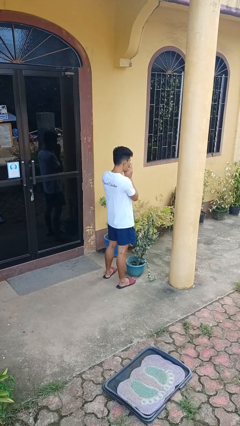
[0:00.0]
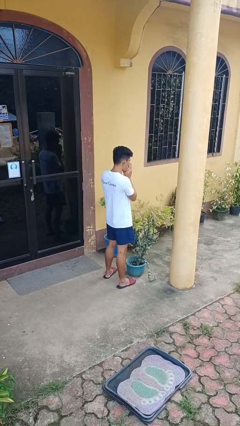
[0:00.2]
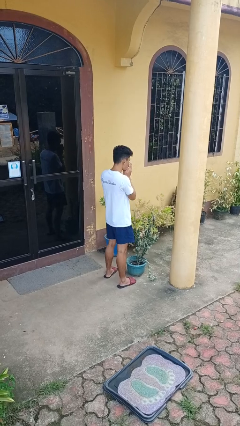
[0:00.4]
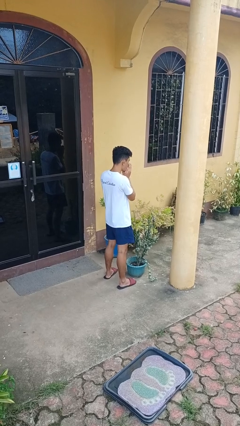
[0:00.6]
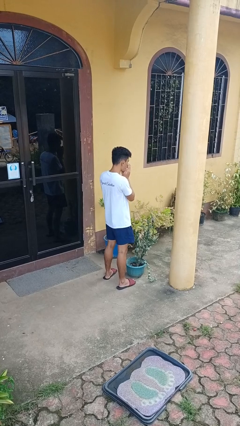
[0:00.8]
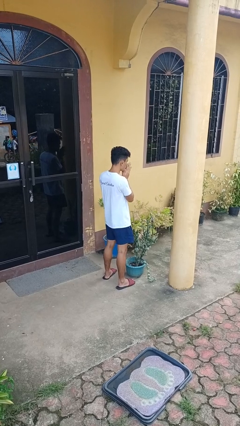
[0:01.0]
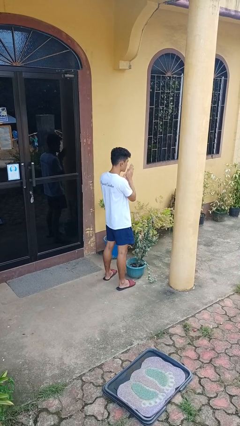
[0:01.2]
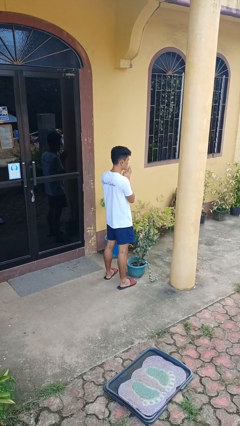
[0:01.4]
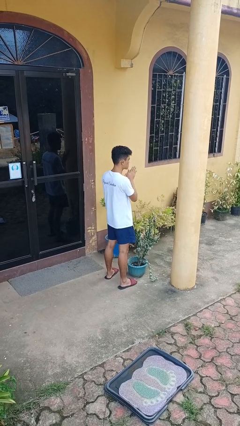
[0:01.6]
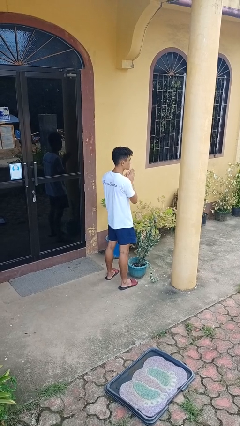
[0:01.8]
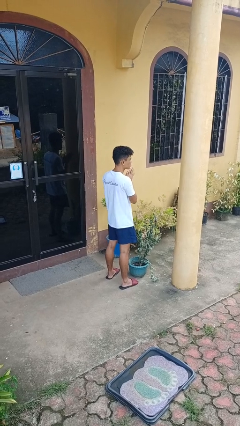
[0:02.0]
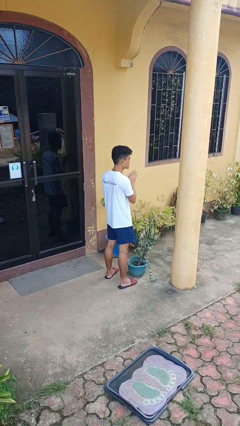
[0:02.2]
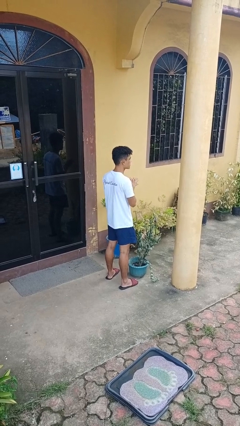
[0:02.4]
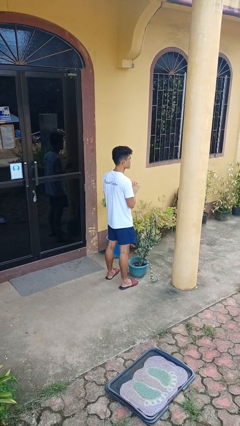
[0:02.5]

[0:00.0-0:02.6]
person blows into hands

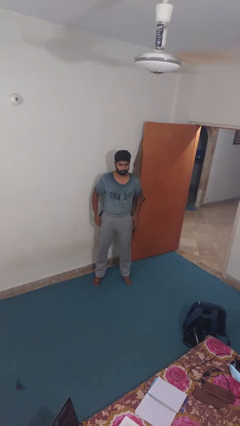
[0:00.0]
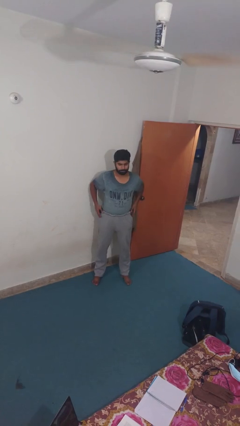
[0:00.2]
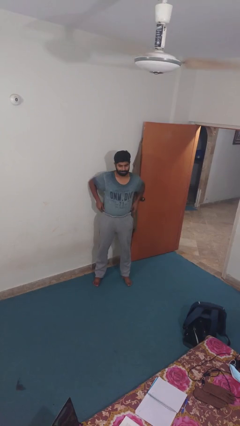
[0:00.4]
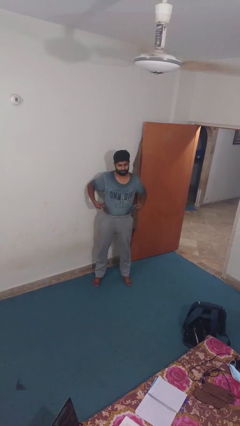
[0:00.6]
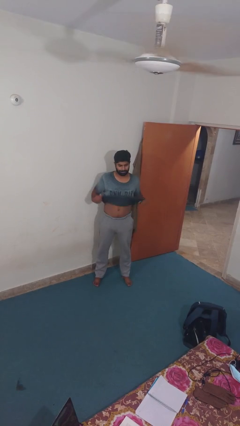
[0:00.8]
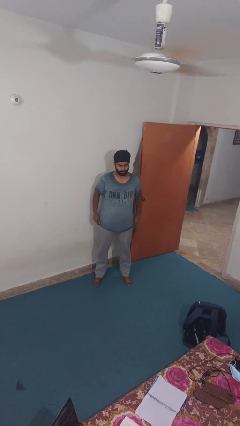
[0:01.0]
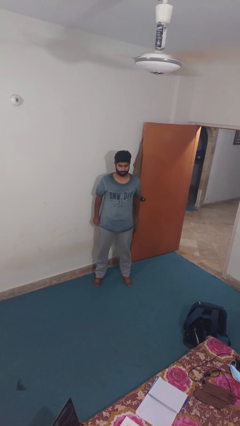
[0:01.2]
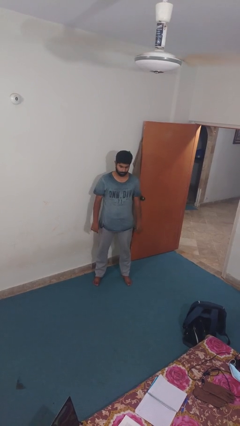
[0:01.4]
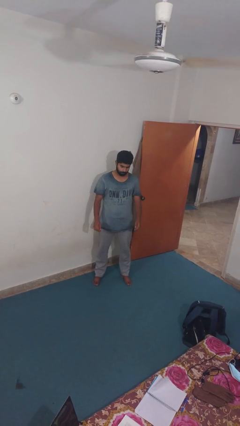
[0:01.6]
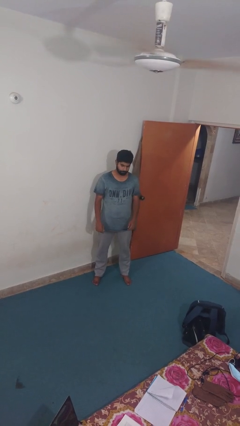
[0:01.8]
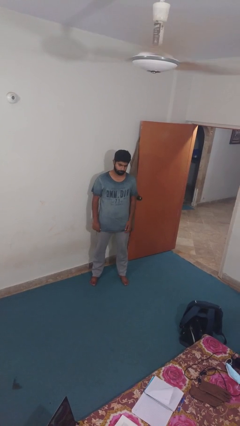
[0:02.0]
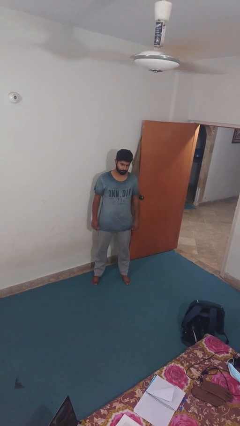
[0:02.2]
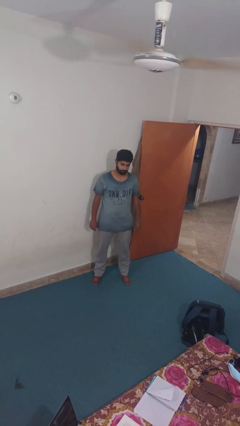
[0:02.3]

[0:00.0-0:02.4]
person untucks shirt

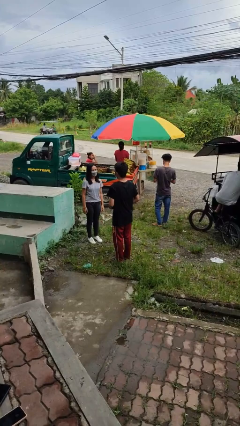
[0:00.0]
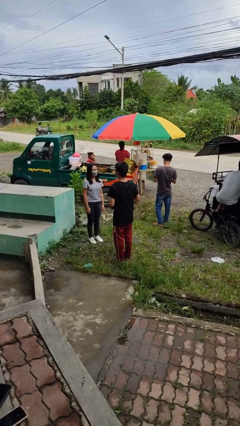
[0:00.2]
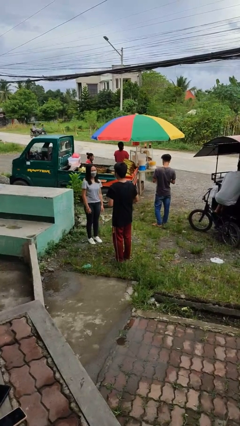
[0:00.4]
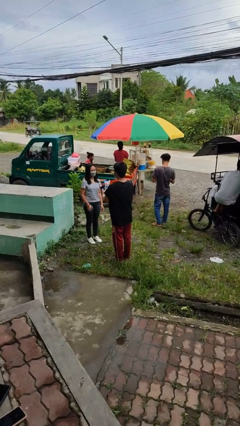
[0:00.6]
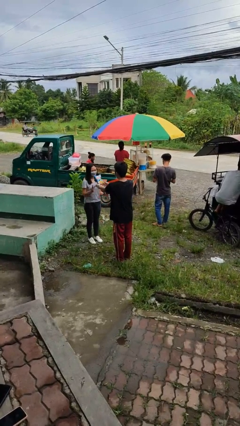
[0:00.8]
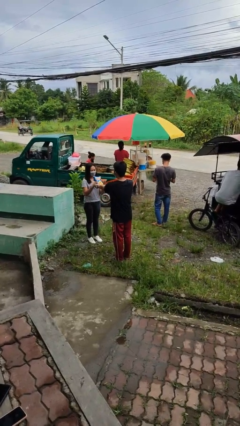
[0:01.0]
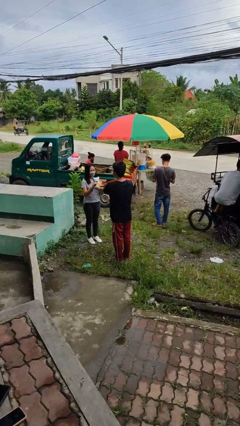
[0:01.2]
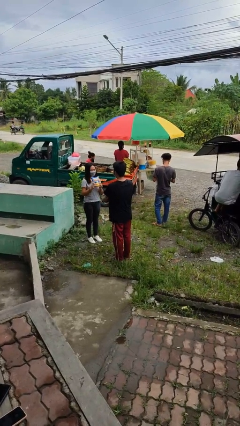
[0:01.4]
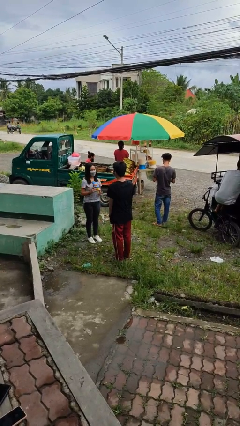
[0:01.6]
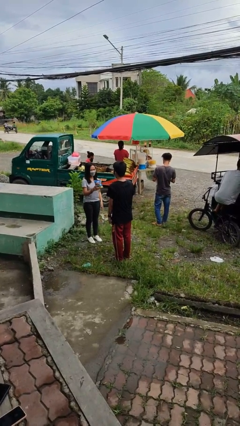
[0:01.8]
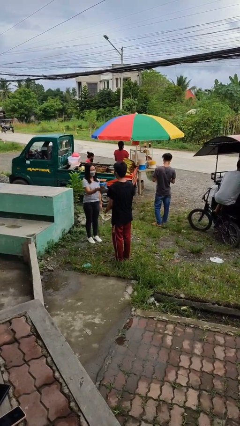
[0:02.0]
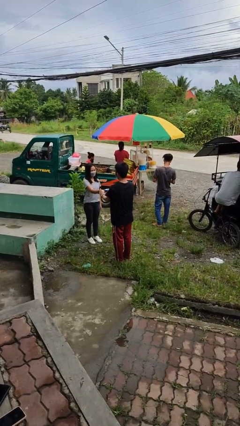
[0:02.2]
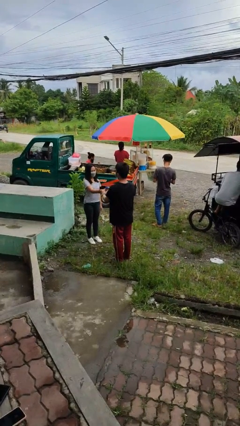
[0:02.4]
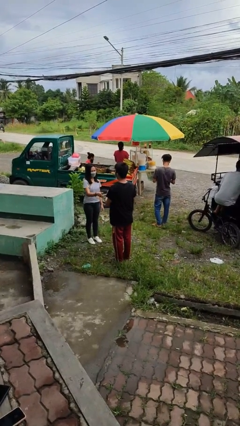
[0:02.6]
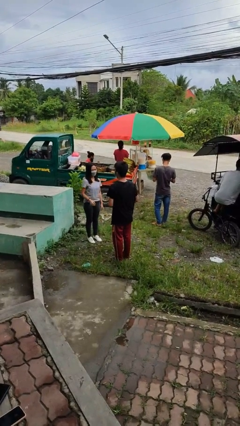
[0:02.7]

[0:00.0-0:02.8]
person transfers object to person

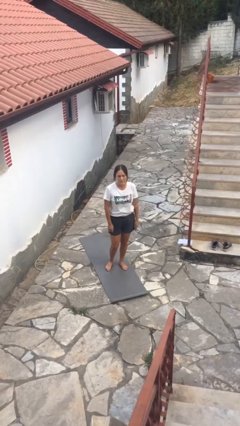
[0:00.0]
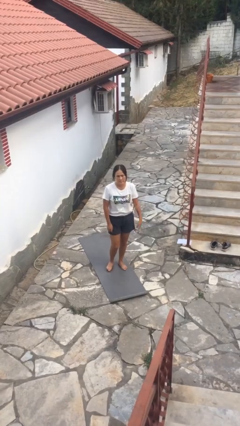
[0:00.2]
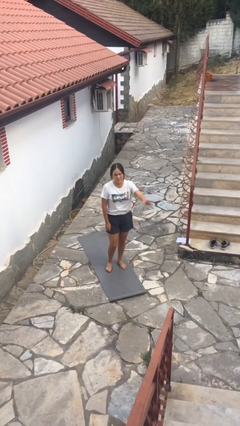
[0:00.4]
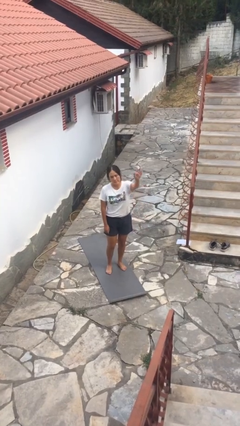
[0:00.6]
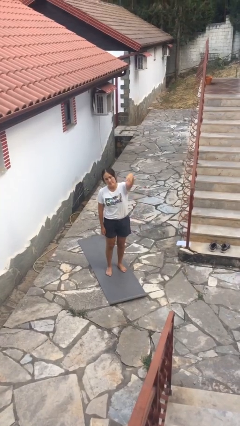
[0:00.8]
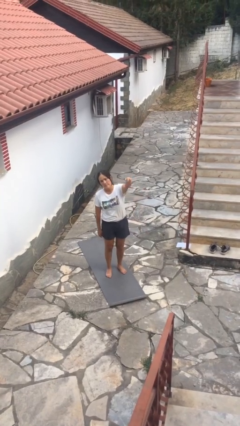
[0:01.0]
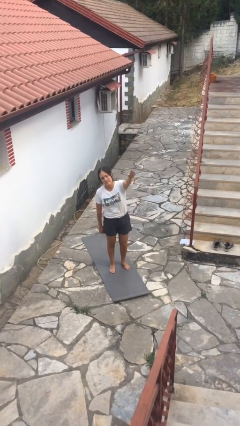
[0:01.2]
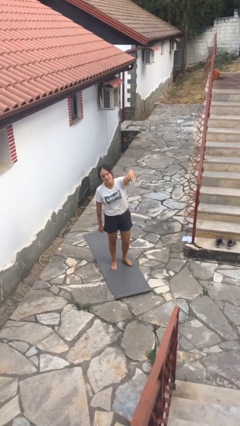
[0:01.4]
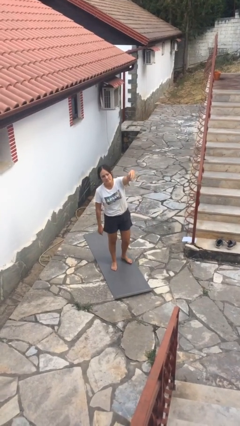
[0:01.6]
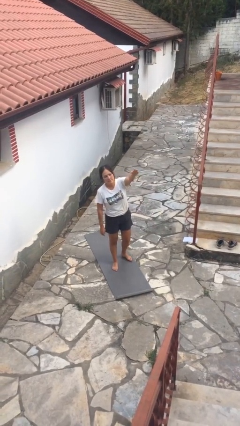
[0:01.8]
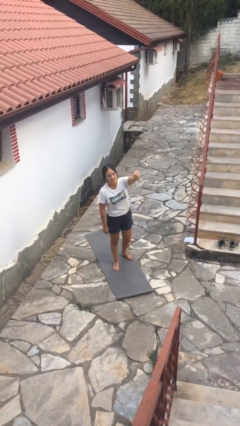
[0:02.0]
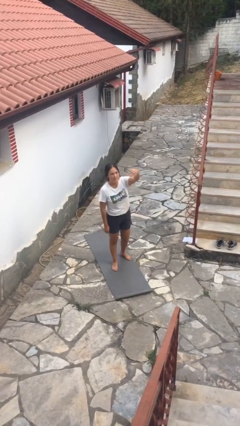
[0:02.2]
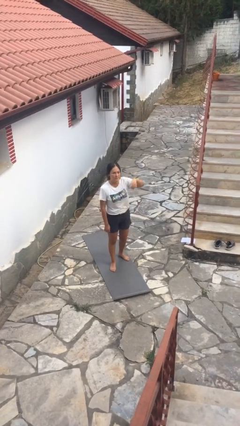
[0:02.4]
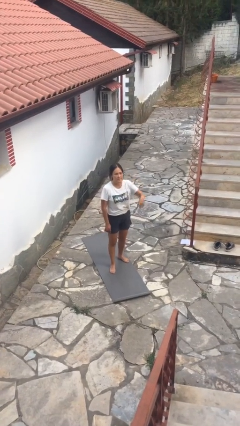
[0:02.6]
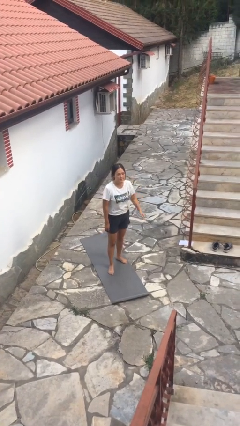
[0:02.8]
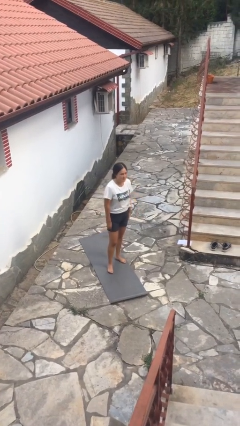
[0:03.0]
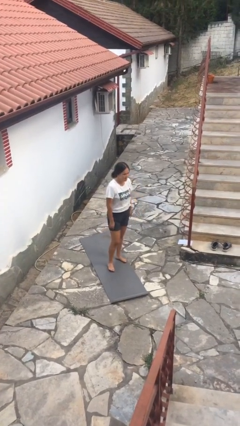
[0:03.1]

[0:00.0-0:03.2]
person gestures come here

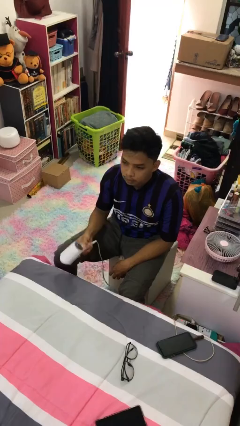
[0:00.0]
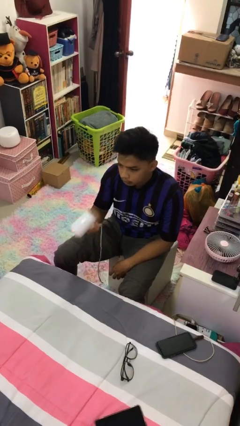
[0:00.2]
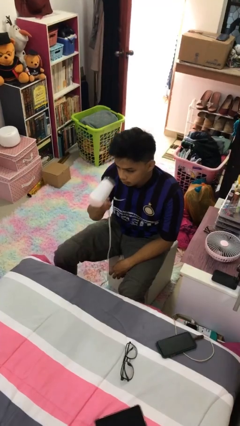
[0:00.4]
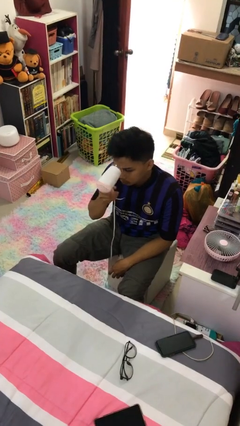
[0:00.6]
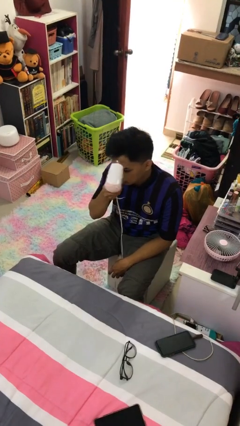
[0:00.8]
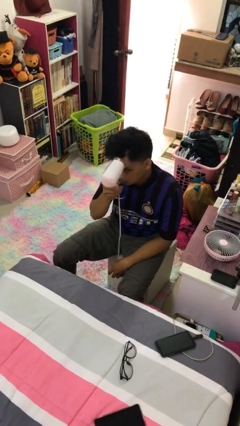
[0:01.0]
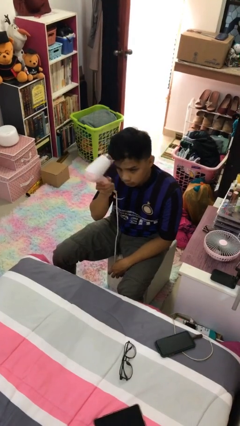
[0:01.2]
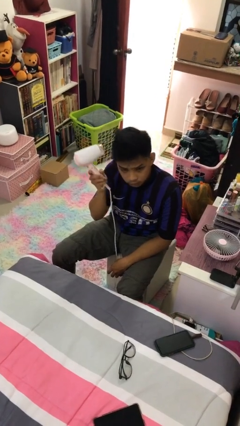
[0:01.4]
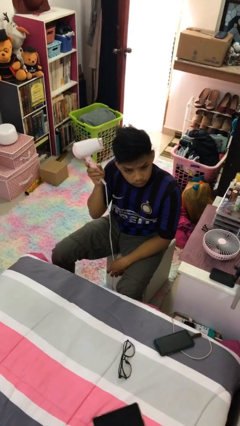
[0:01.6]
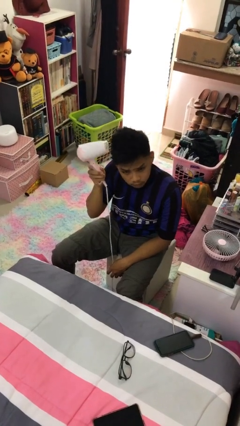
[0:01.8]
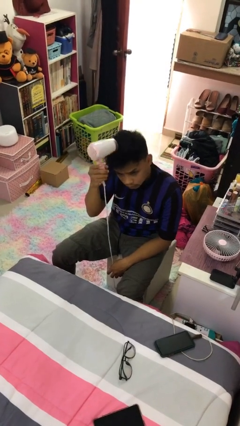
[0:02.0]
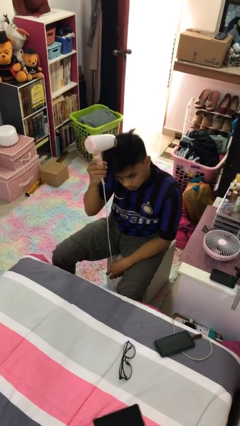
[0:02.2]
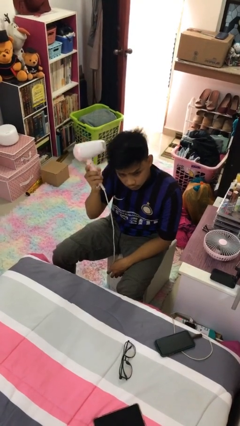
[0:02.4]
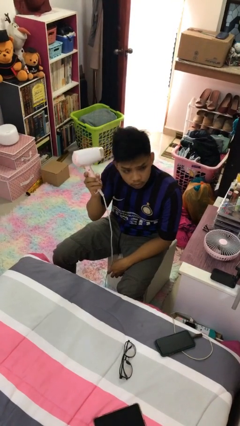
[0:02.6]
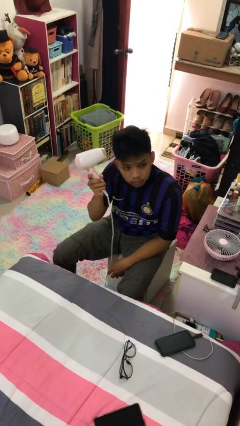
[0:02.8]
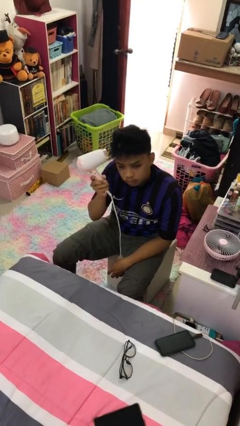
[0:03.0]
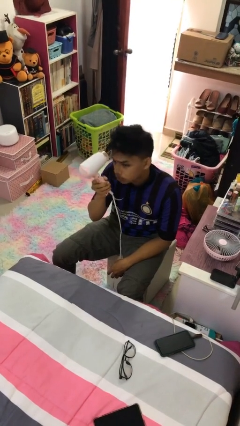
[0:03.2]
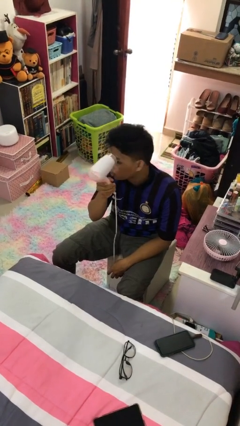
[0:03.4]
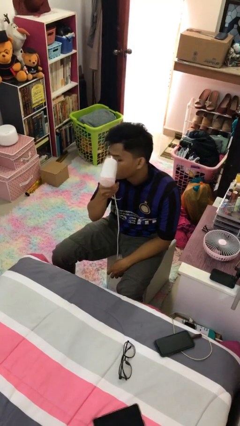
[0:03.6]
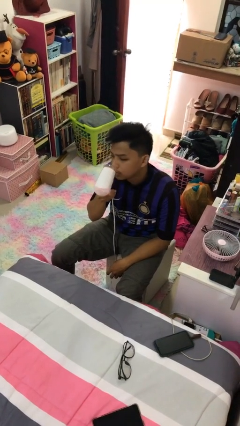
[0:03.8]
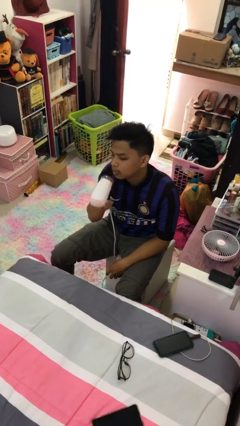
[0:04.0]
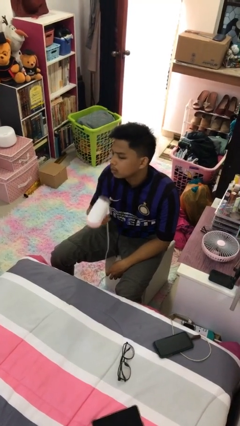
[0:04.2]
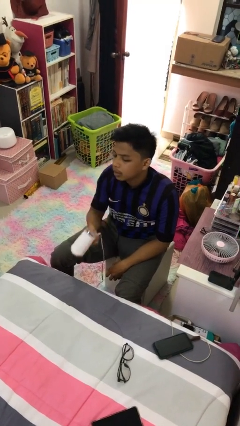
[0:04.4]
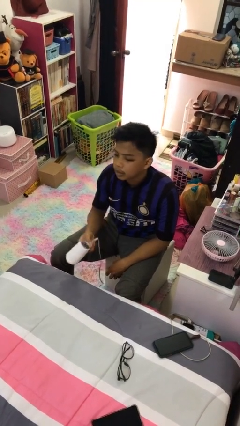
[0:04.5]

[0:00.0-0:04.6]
person dries hair with hairdryer

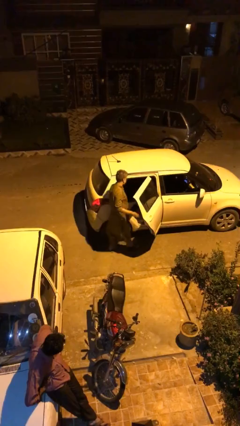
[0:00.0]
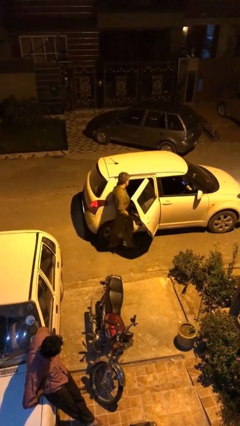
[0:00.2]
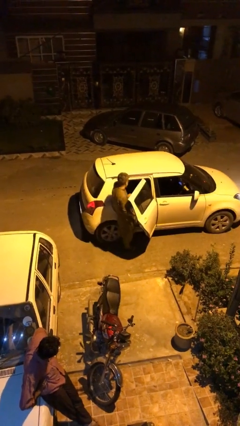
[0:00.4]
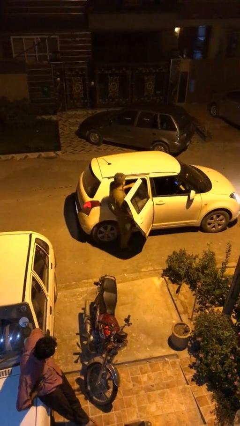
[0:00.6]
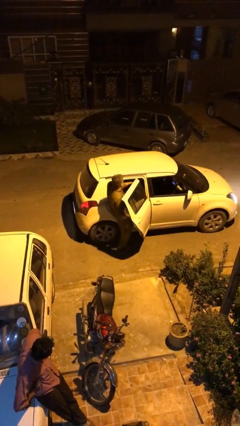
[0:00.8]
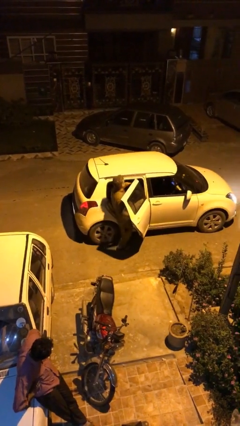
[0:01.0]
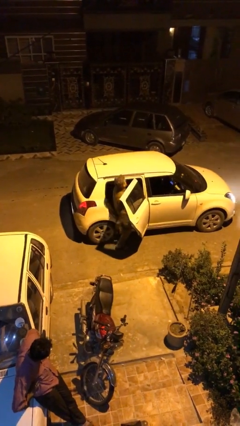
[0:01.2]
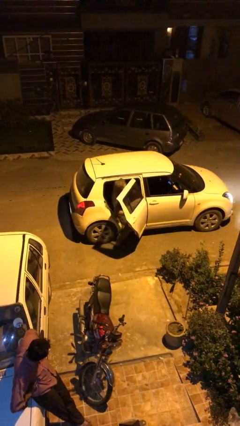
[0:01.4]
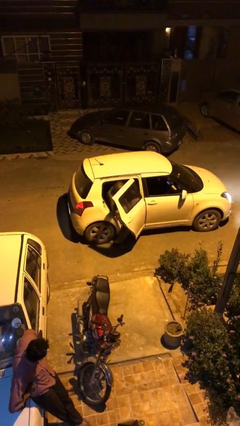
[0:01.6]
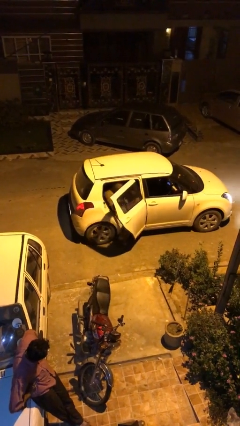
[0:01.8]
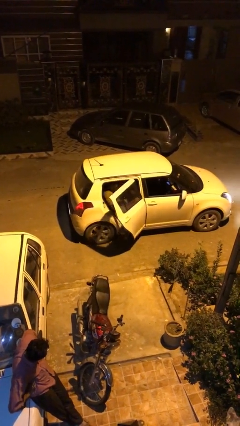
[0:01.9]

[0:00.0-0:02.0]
person enters car
